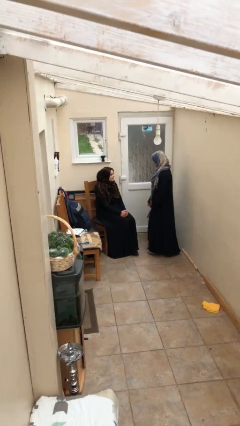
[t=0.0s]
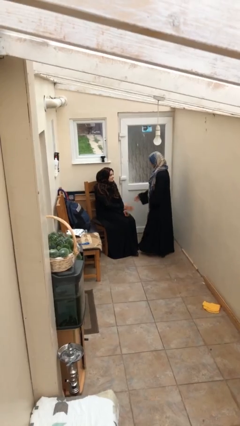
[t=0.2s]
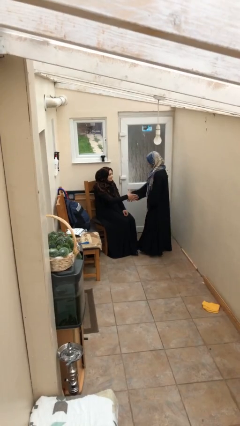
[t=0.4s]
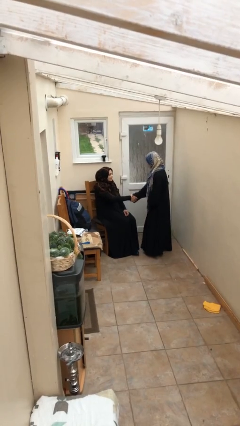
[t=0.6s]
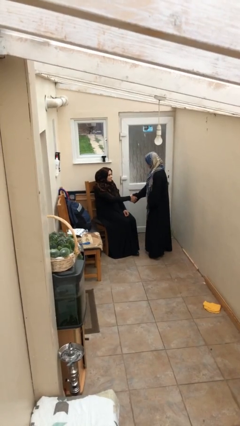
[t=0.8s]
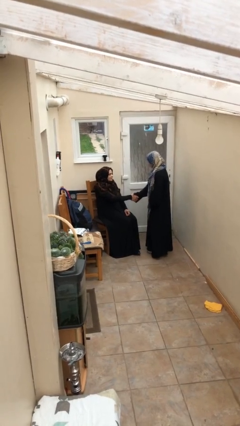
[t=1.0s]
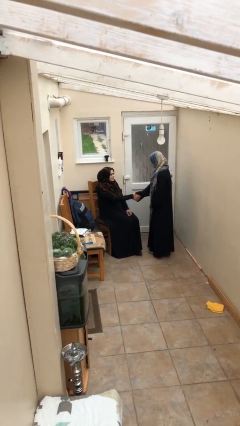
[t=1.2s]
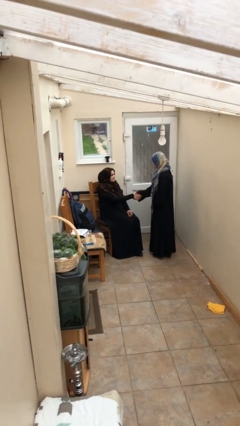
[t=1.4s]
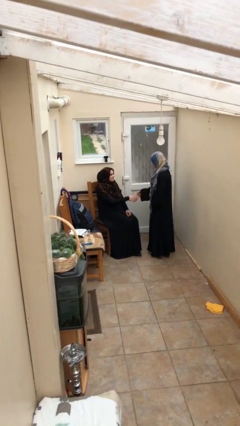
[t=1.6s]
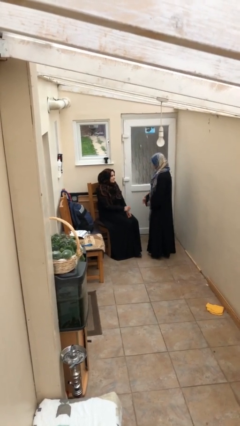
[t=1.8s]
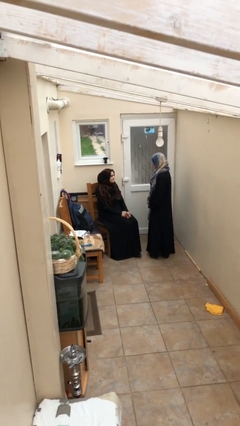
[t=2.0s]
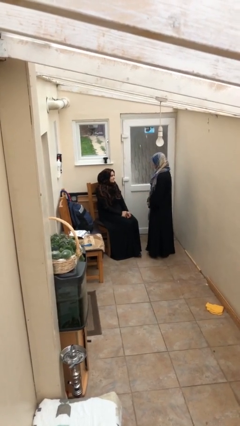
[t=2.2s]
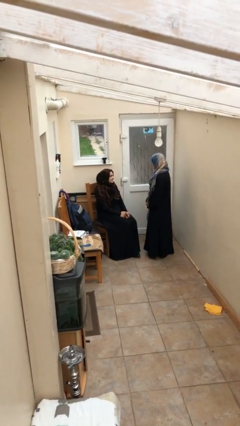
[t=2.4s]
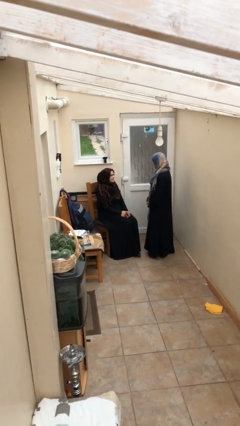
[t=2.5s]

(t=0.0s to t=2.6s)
person shakes hand

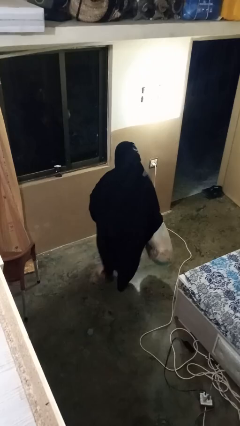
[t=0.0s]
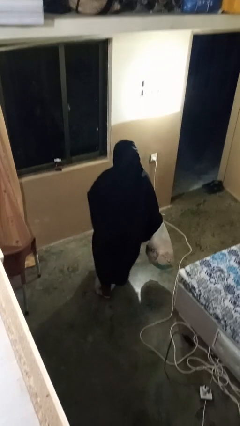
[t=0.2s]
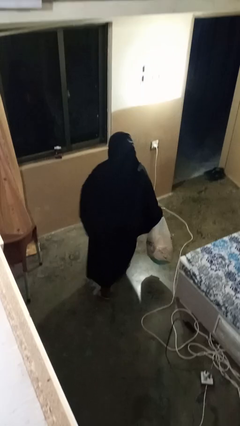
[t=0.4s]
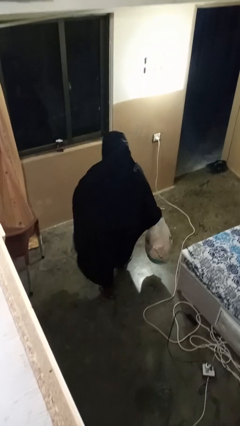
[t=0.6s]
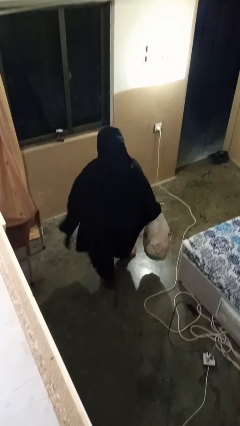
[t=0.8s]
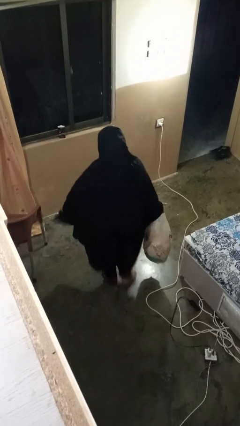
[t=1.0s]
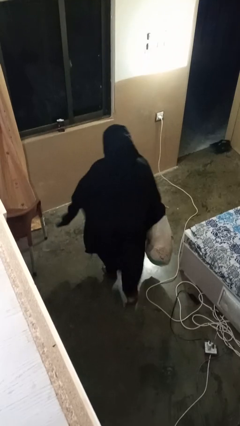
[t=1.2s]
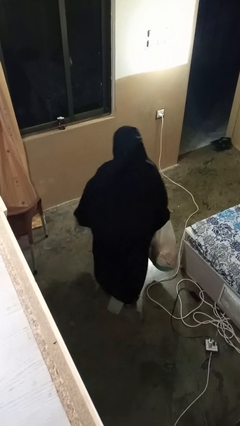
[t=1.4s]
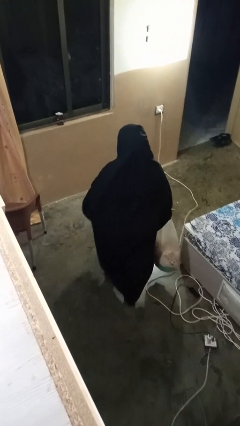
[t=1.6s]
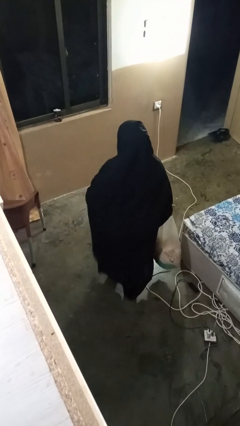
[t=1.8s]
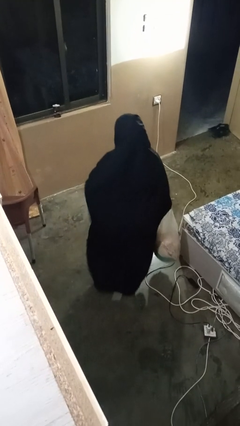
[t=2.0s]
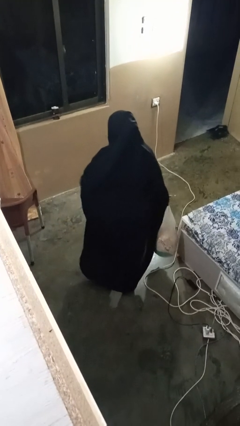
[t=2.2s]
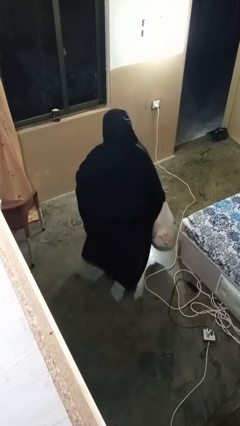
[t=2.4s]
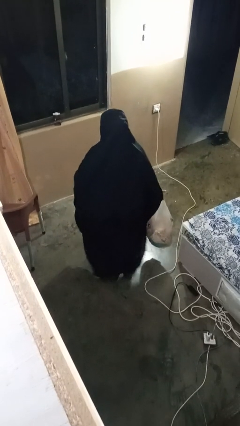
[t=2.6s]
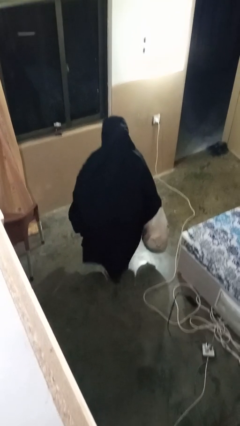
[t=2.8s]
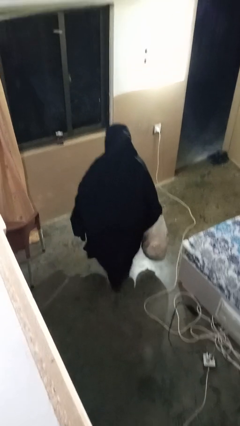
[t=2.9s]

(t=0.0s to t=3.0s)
person carries groceries

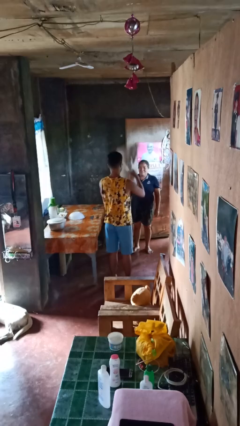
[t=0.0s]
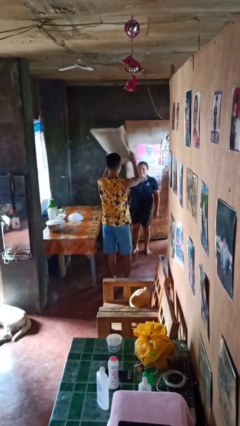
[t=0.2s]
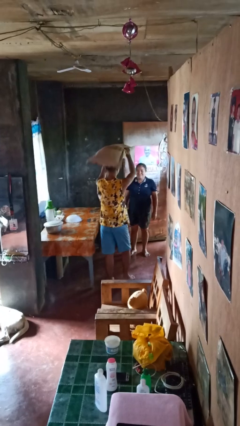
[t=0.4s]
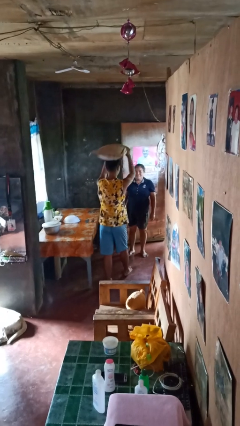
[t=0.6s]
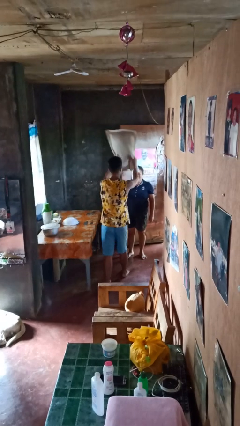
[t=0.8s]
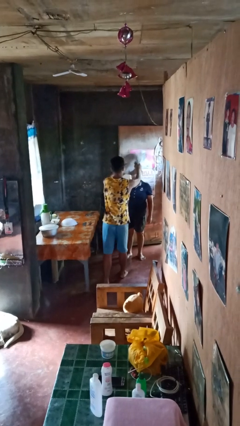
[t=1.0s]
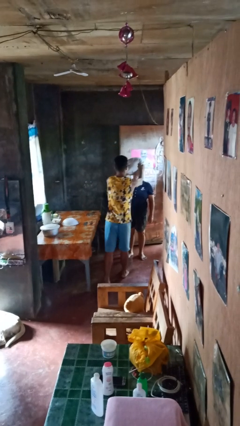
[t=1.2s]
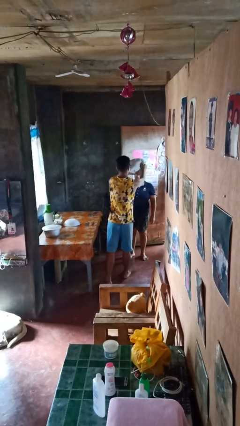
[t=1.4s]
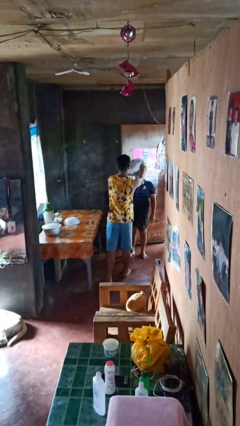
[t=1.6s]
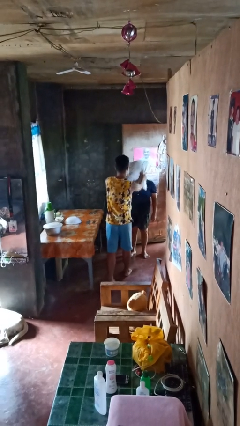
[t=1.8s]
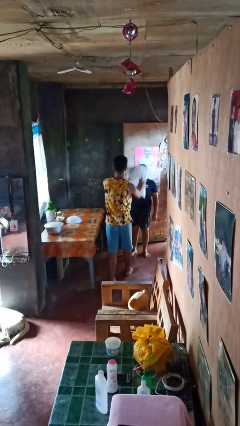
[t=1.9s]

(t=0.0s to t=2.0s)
person hits person with pillow

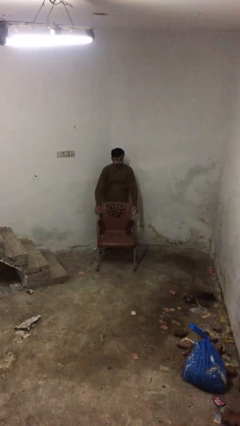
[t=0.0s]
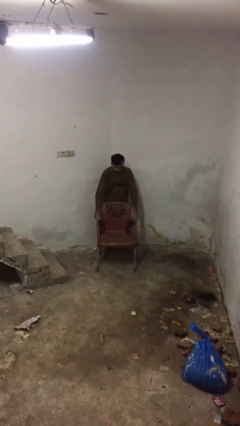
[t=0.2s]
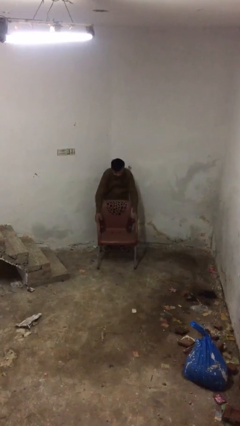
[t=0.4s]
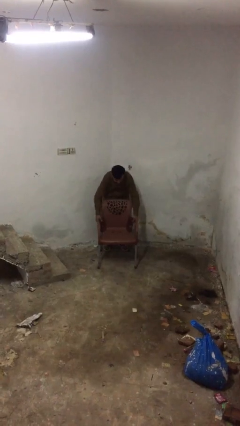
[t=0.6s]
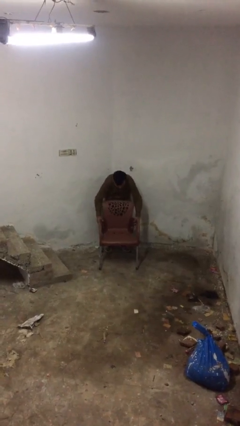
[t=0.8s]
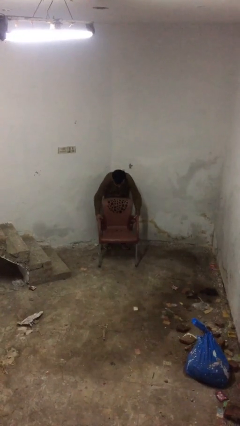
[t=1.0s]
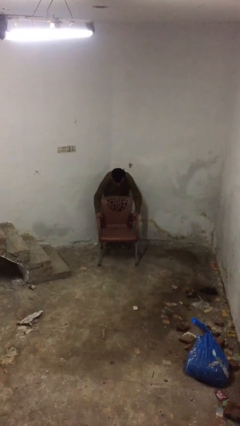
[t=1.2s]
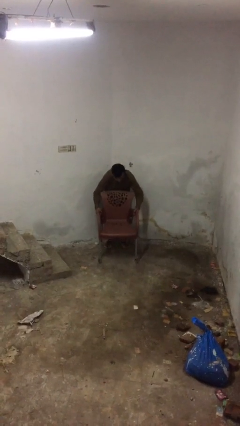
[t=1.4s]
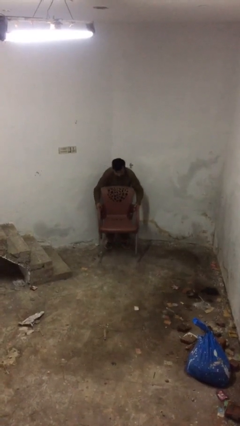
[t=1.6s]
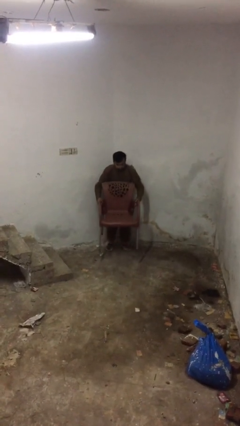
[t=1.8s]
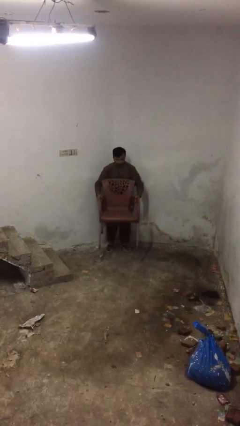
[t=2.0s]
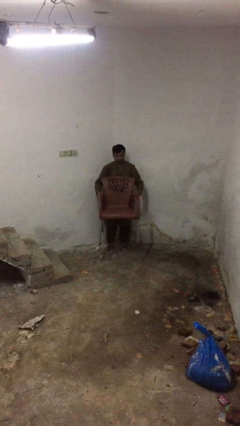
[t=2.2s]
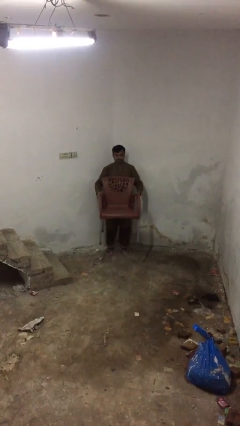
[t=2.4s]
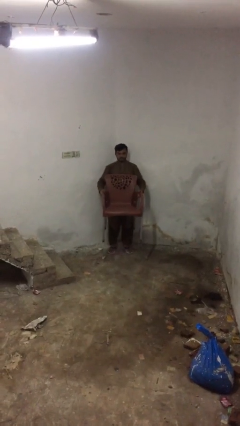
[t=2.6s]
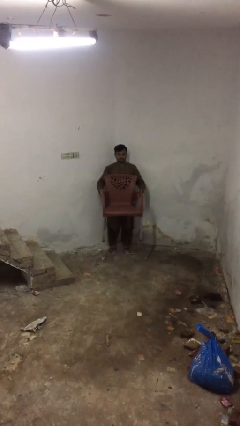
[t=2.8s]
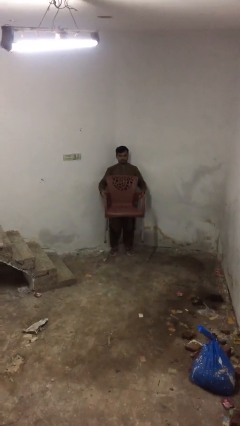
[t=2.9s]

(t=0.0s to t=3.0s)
person picks up object from floor

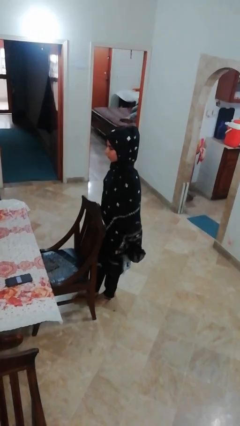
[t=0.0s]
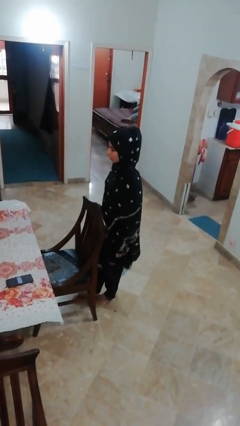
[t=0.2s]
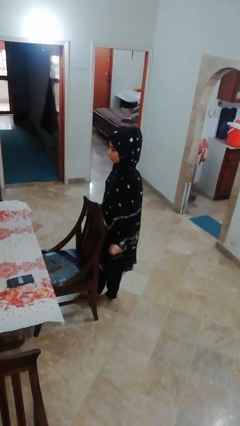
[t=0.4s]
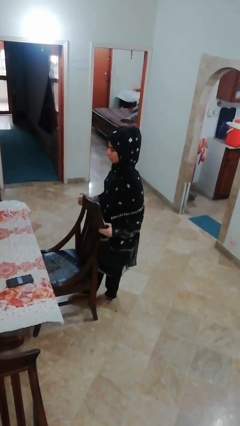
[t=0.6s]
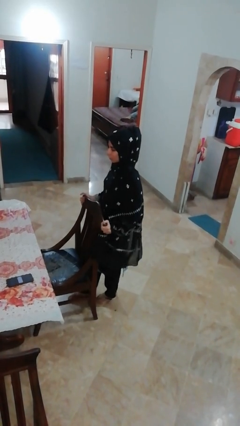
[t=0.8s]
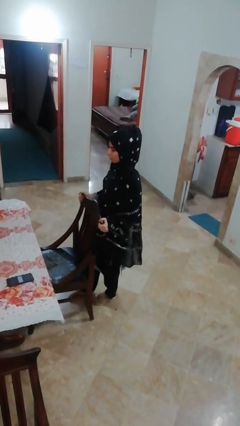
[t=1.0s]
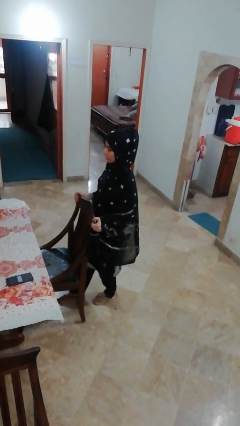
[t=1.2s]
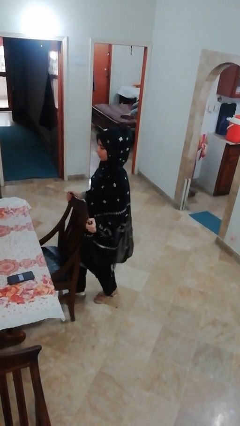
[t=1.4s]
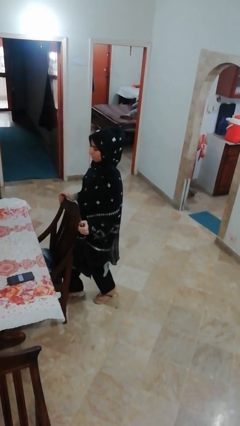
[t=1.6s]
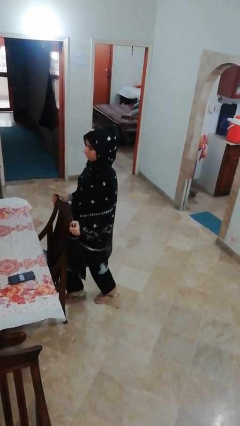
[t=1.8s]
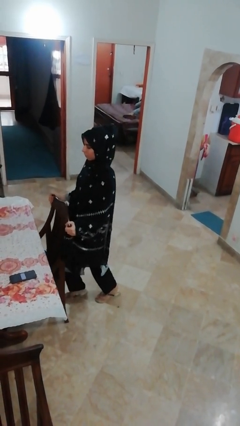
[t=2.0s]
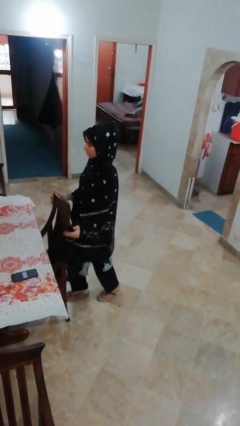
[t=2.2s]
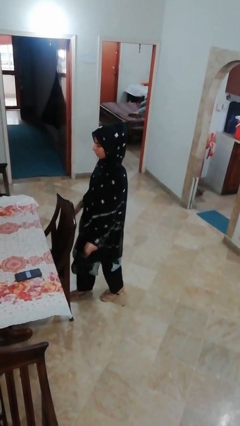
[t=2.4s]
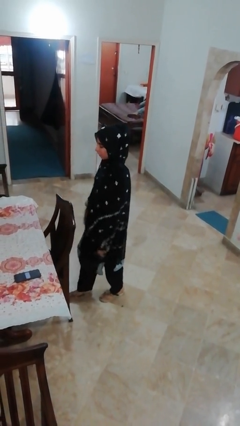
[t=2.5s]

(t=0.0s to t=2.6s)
person pushes in chair

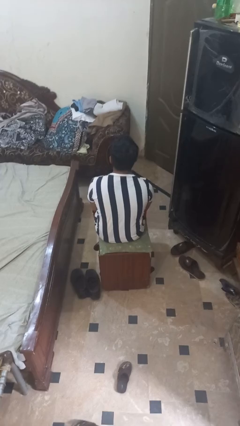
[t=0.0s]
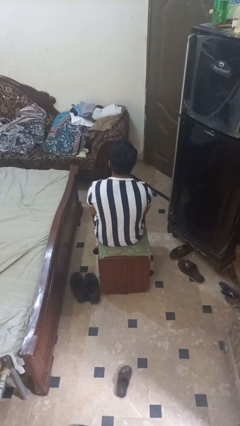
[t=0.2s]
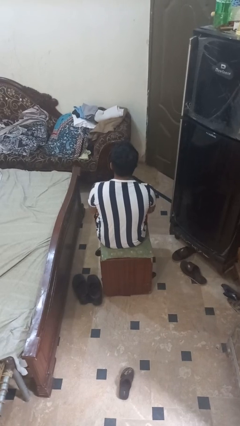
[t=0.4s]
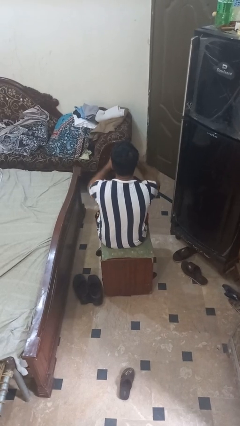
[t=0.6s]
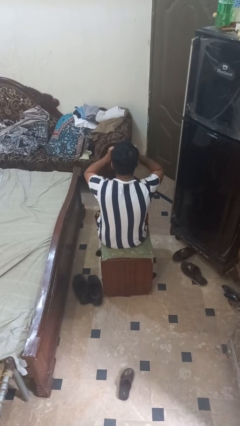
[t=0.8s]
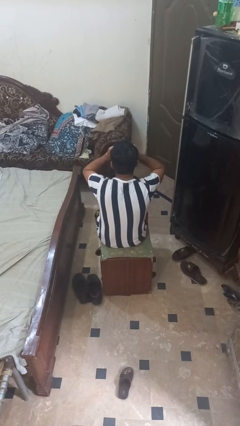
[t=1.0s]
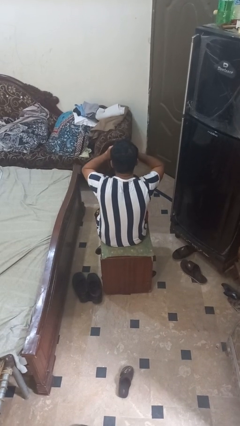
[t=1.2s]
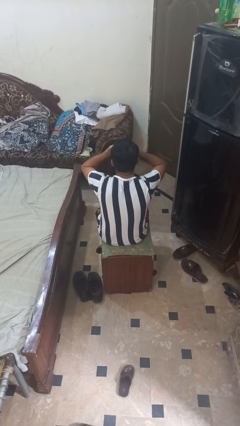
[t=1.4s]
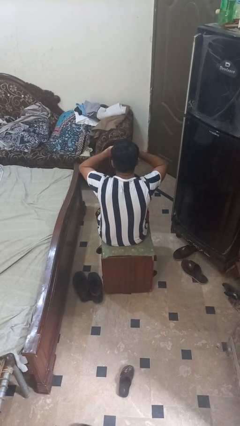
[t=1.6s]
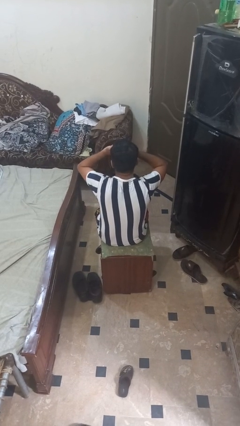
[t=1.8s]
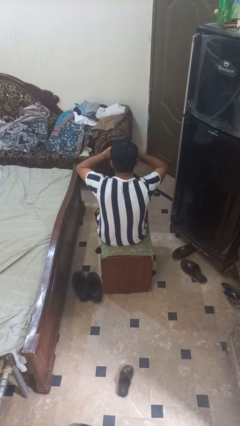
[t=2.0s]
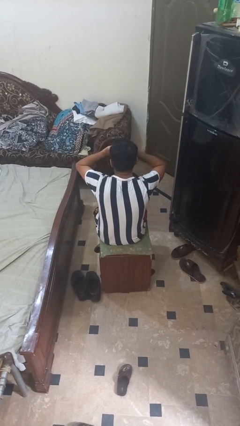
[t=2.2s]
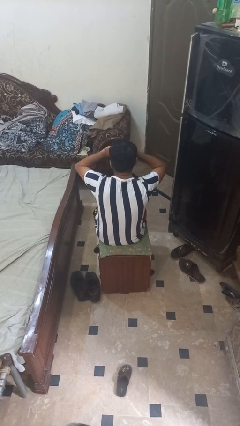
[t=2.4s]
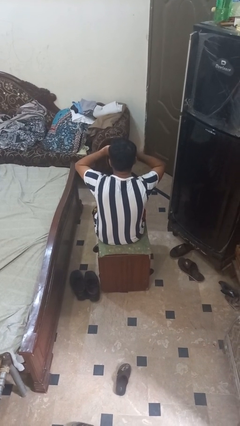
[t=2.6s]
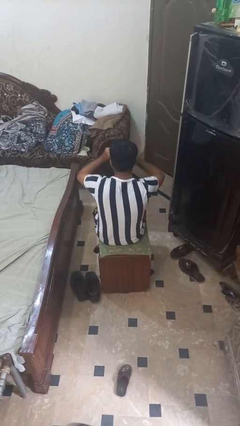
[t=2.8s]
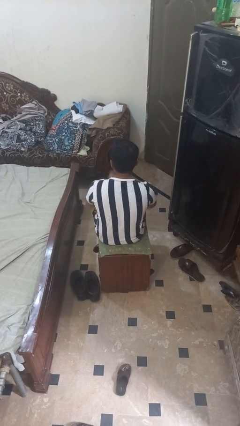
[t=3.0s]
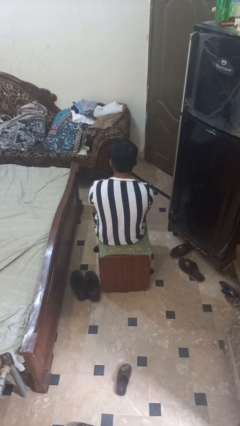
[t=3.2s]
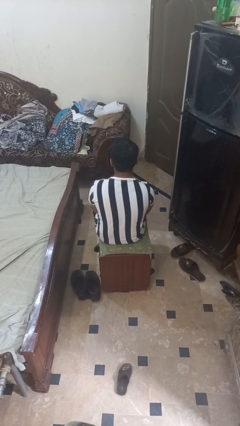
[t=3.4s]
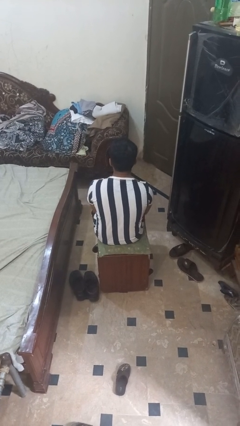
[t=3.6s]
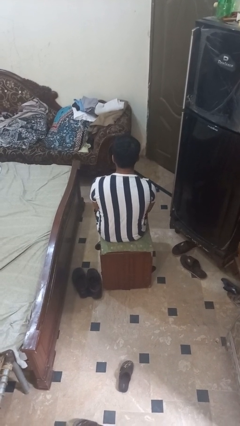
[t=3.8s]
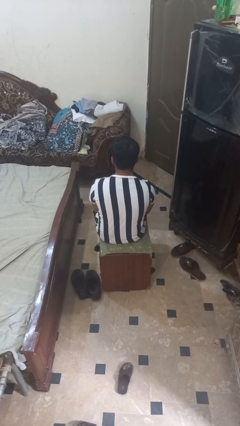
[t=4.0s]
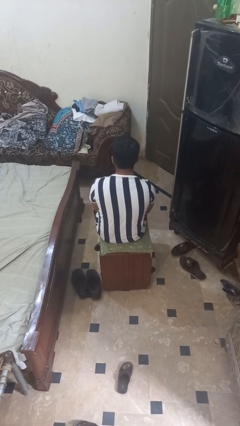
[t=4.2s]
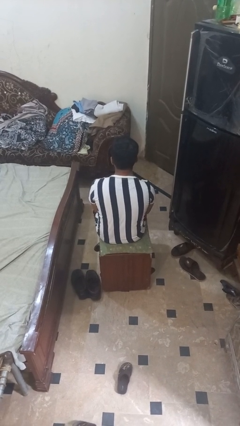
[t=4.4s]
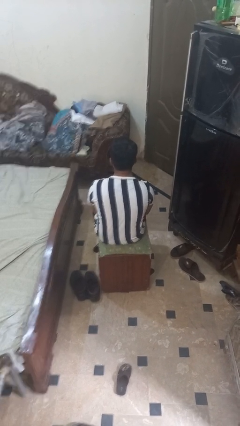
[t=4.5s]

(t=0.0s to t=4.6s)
person rubs eyes
